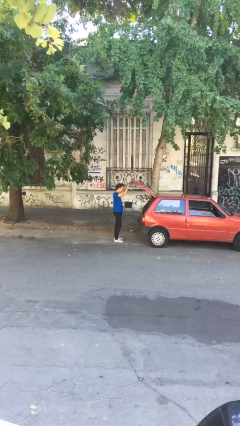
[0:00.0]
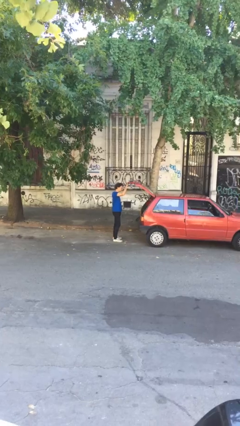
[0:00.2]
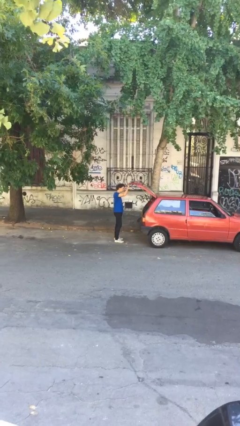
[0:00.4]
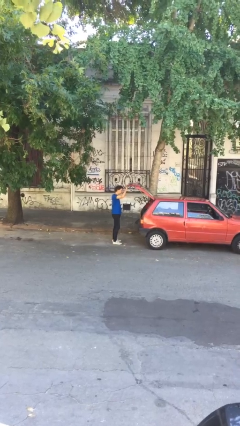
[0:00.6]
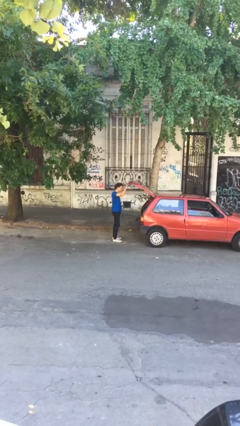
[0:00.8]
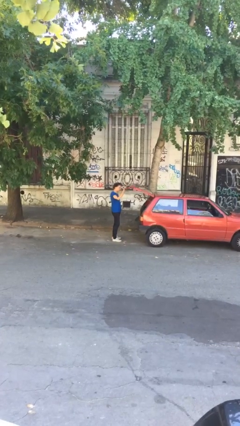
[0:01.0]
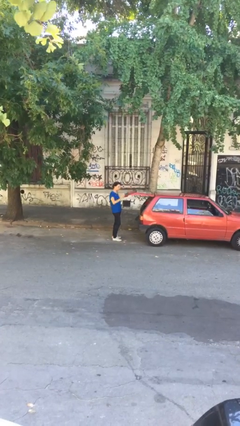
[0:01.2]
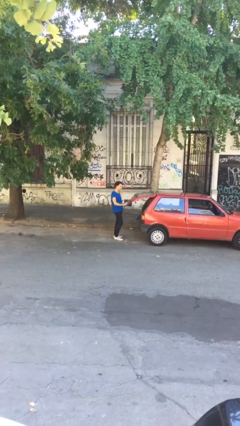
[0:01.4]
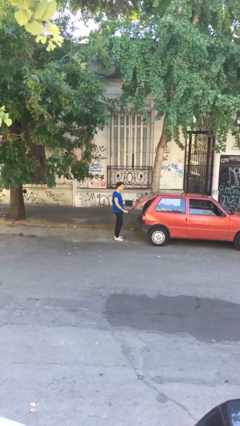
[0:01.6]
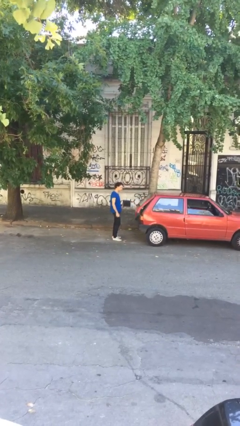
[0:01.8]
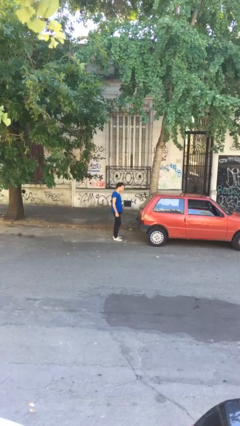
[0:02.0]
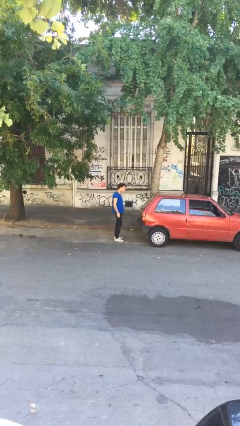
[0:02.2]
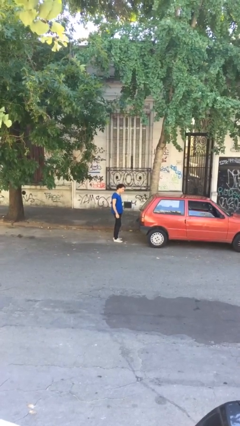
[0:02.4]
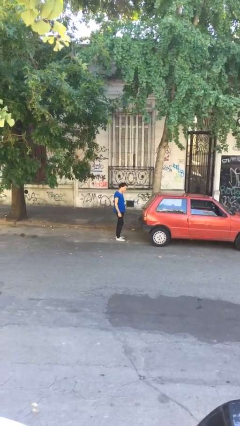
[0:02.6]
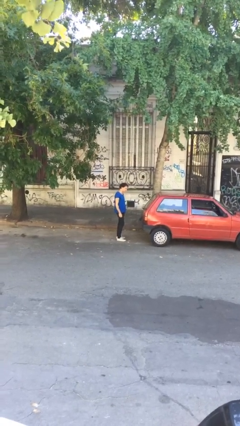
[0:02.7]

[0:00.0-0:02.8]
person closes car trunk

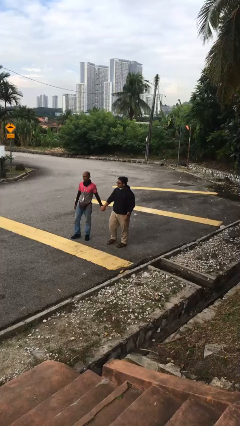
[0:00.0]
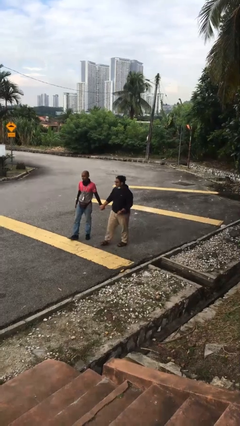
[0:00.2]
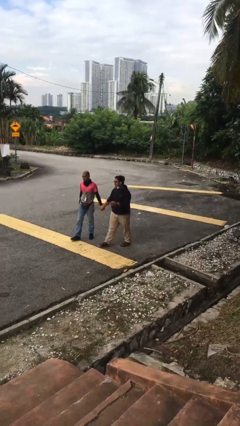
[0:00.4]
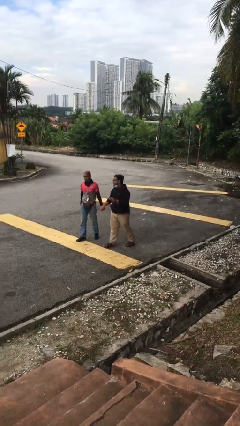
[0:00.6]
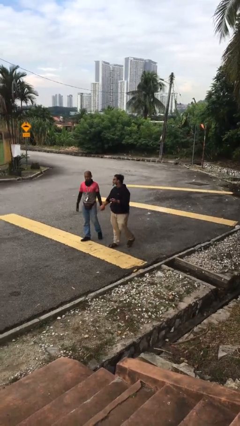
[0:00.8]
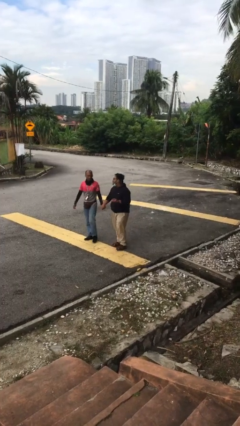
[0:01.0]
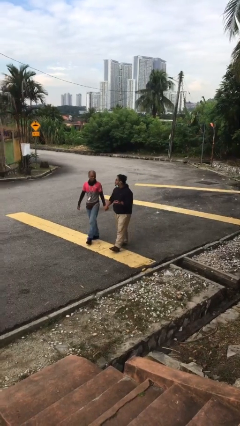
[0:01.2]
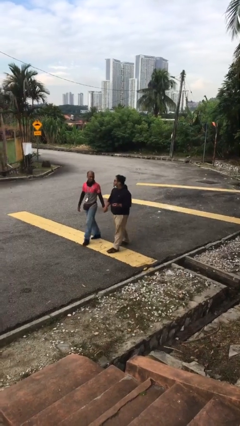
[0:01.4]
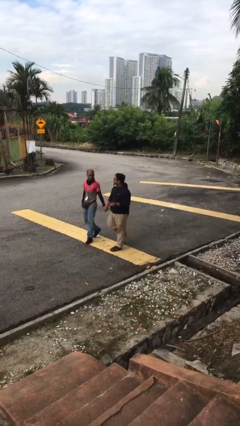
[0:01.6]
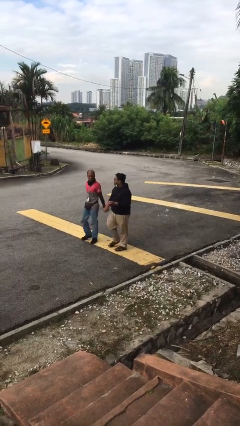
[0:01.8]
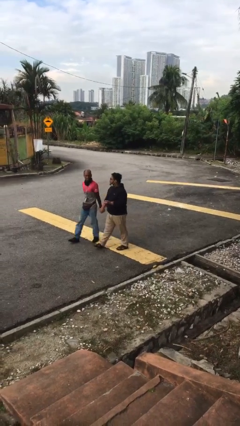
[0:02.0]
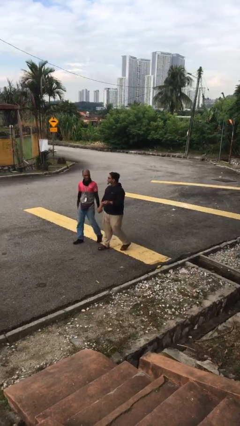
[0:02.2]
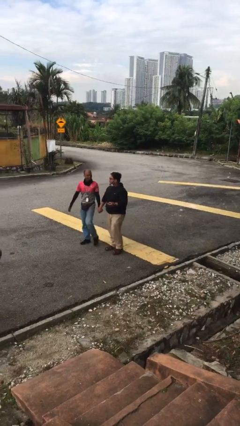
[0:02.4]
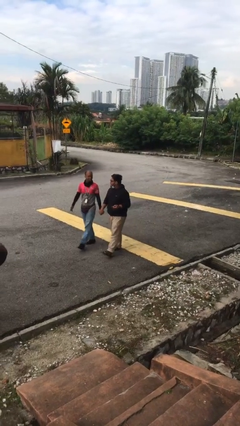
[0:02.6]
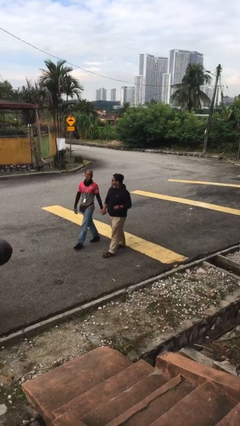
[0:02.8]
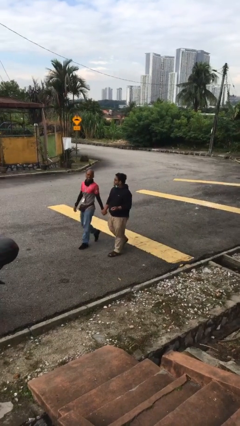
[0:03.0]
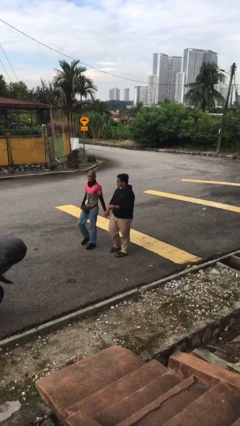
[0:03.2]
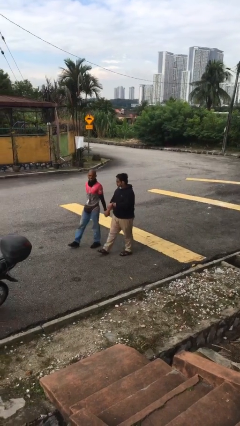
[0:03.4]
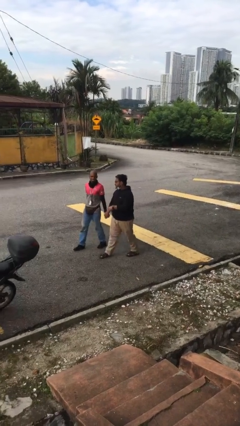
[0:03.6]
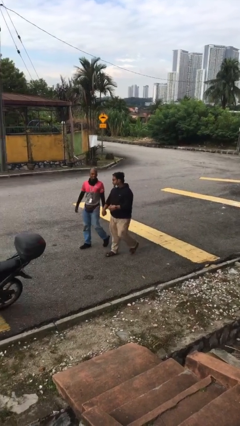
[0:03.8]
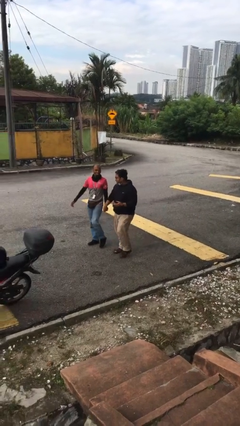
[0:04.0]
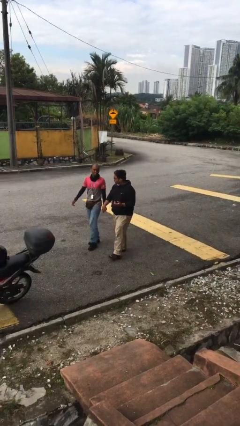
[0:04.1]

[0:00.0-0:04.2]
person holds hand

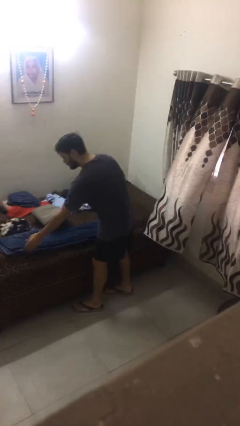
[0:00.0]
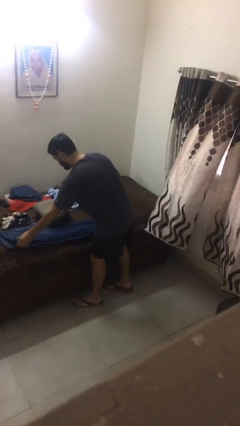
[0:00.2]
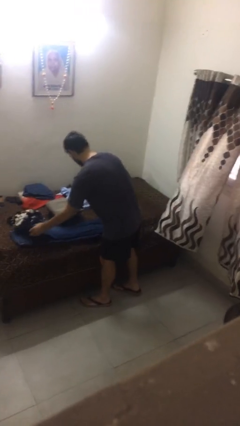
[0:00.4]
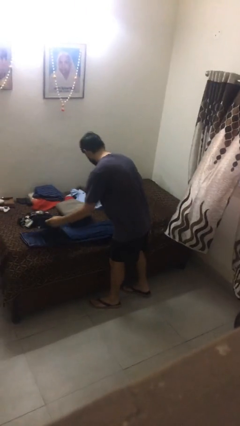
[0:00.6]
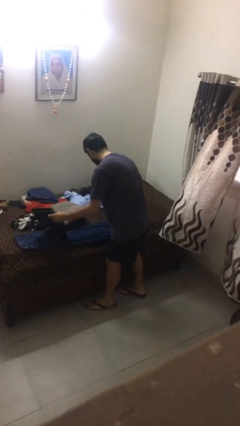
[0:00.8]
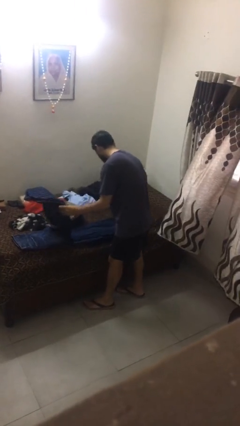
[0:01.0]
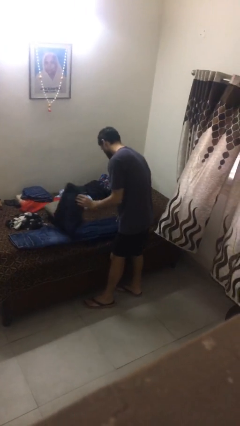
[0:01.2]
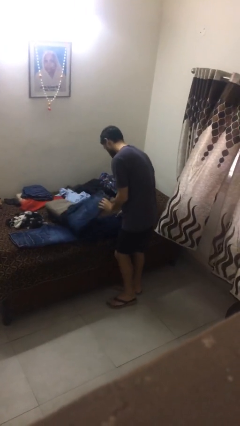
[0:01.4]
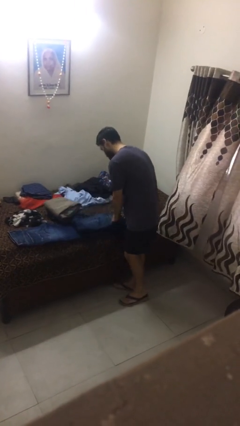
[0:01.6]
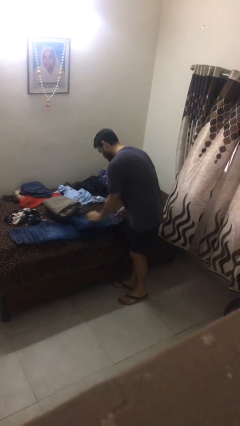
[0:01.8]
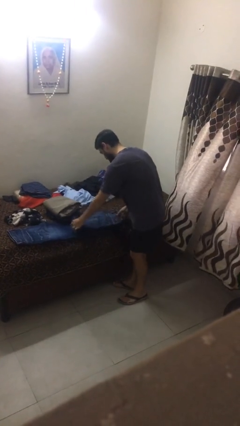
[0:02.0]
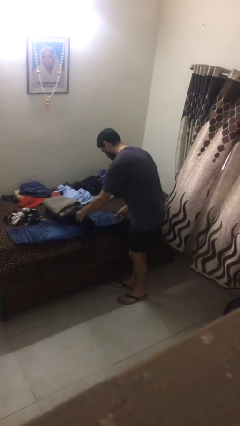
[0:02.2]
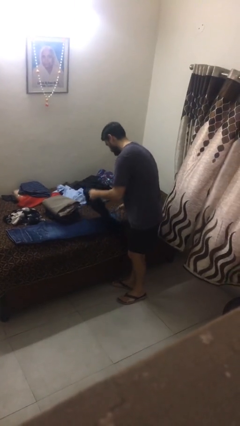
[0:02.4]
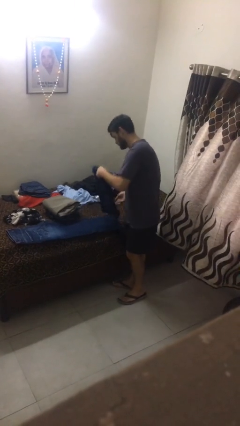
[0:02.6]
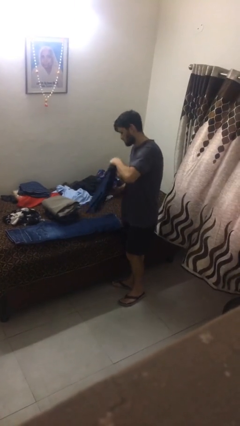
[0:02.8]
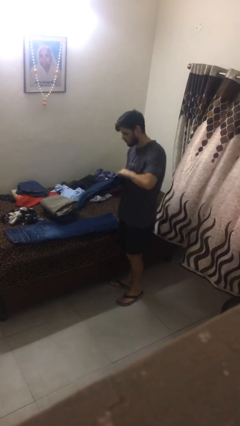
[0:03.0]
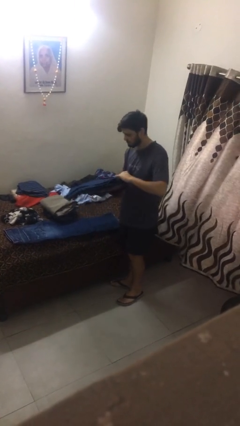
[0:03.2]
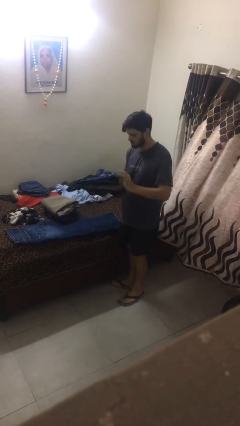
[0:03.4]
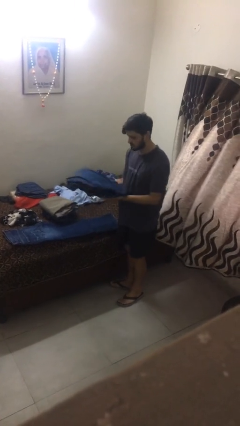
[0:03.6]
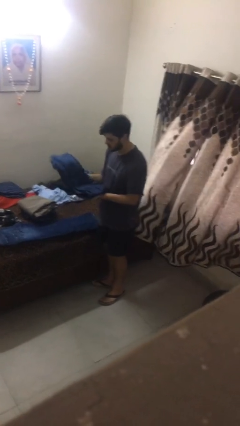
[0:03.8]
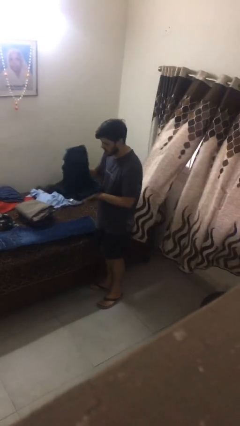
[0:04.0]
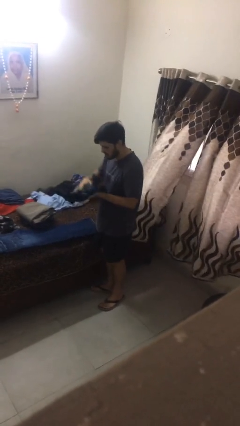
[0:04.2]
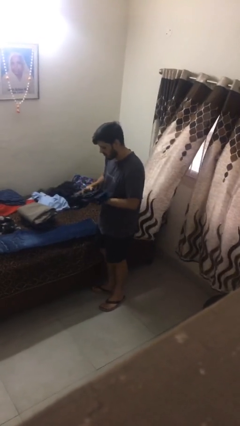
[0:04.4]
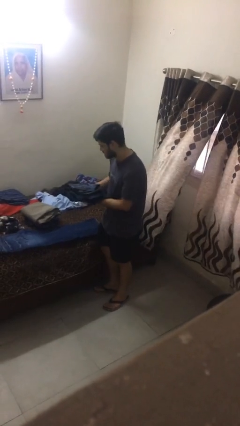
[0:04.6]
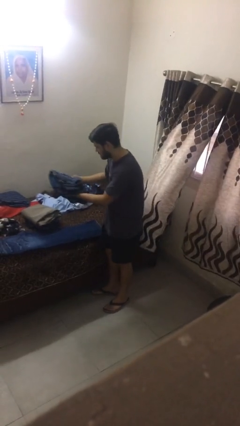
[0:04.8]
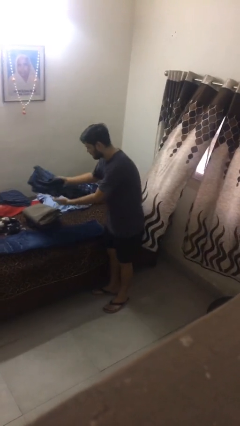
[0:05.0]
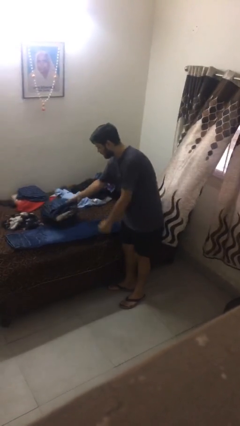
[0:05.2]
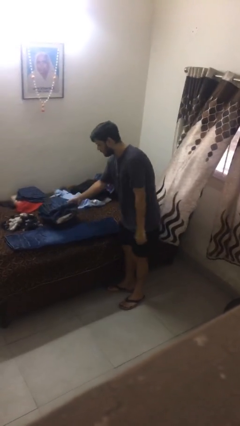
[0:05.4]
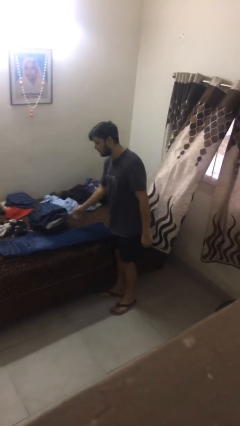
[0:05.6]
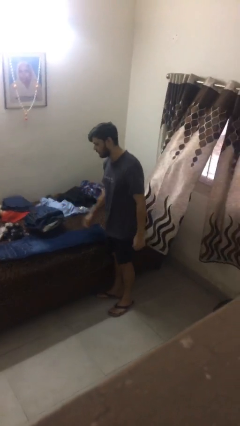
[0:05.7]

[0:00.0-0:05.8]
person folds pants

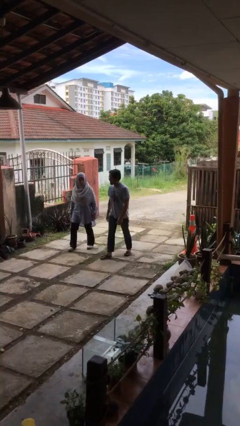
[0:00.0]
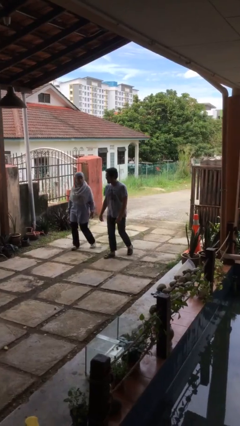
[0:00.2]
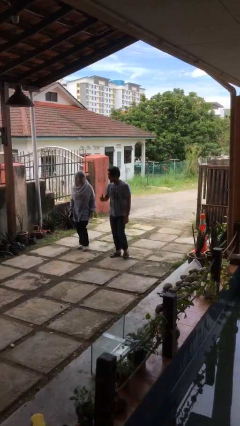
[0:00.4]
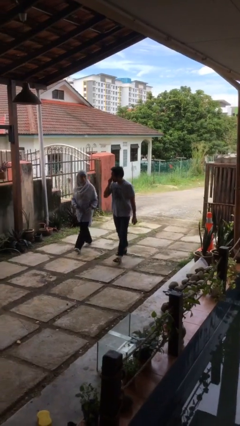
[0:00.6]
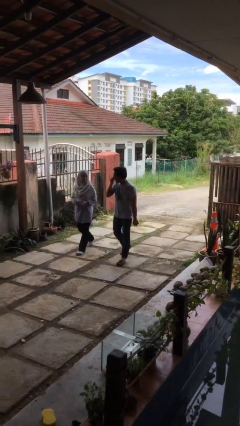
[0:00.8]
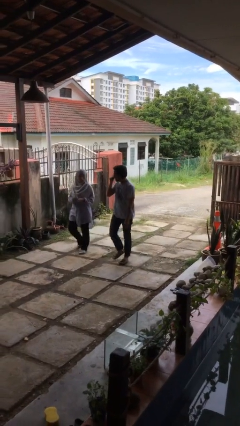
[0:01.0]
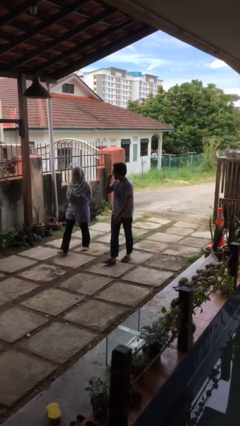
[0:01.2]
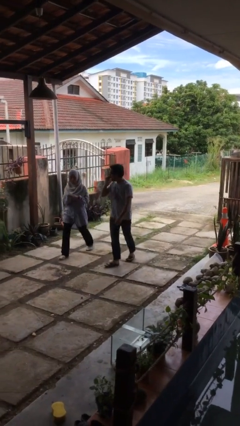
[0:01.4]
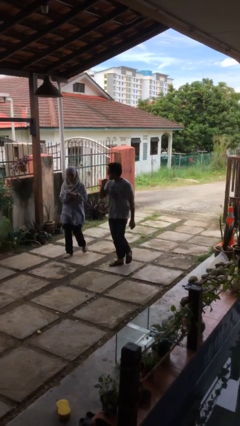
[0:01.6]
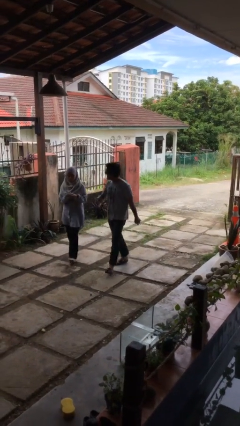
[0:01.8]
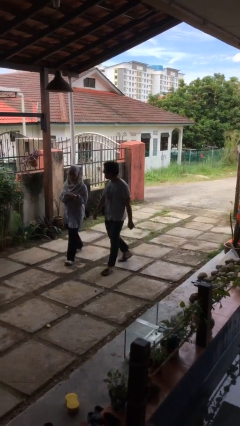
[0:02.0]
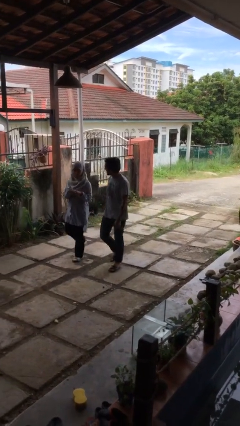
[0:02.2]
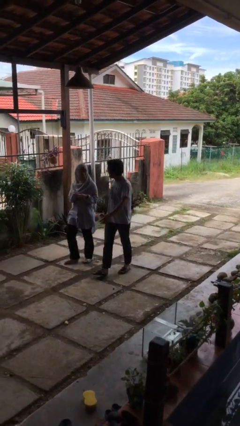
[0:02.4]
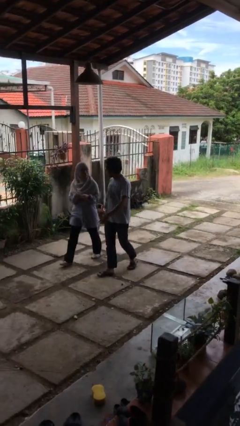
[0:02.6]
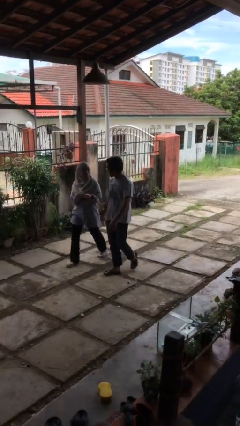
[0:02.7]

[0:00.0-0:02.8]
person talks to person

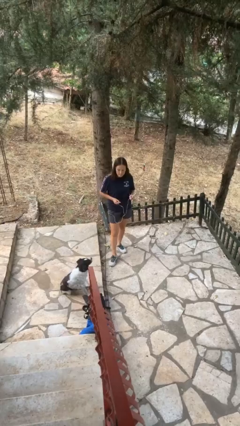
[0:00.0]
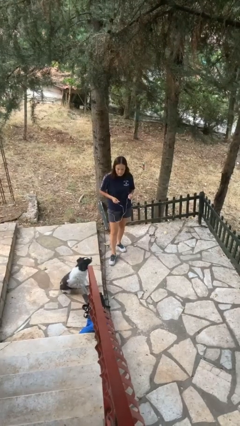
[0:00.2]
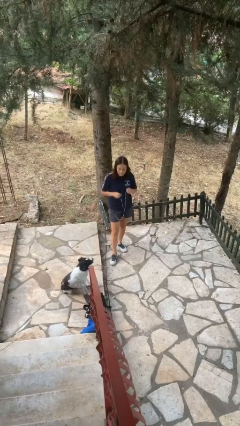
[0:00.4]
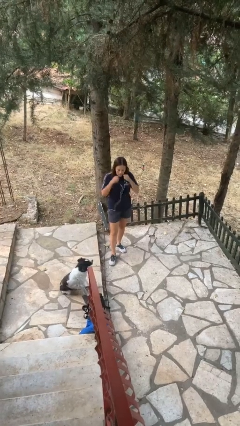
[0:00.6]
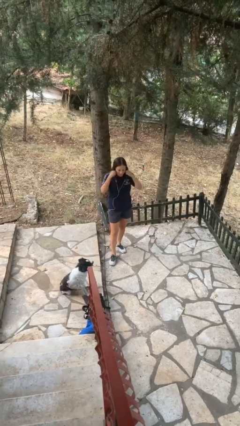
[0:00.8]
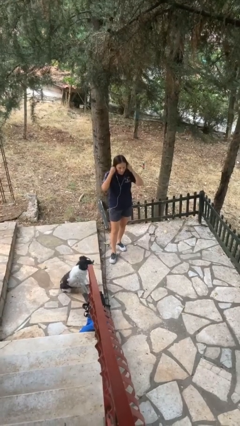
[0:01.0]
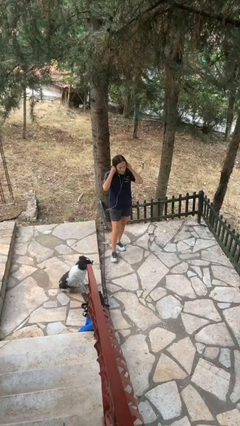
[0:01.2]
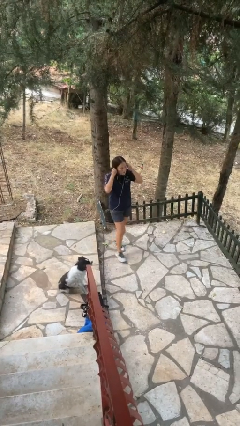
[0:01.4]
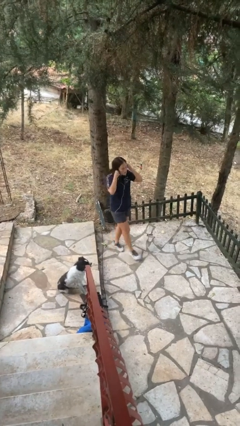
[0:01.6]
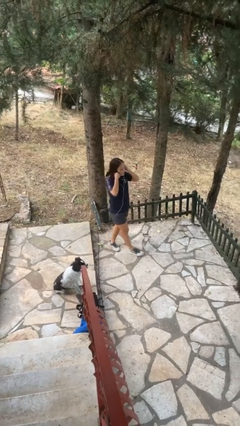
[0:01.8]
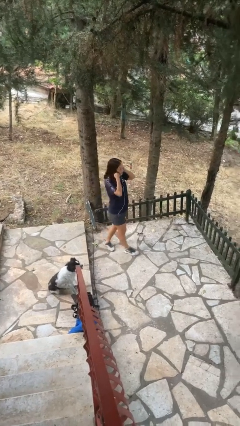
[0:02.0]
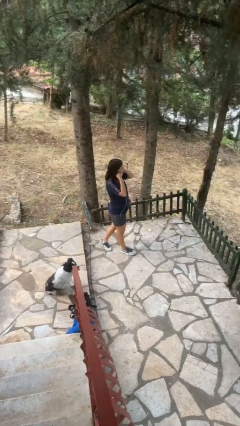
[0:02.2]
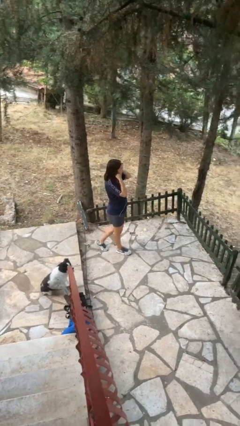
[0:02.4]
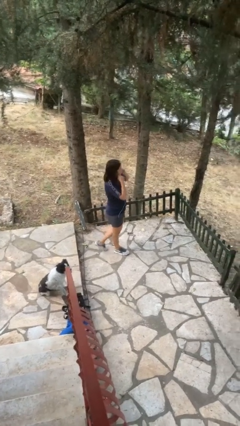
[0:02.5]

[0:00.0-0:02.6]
person puts on headphones
